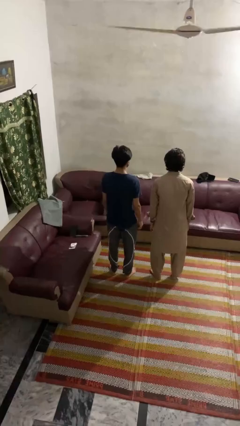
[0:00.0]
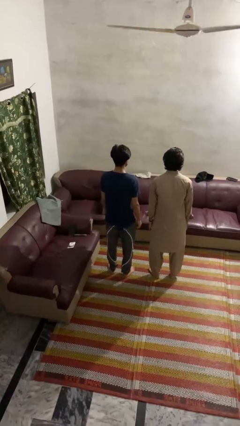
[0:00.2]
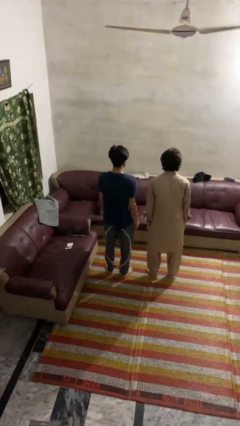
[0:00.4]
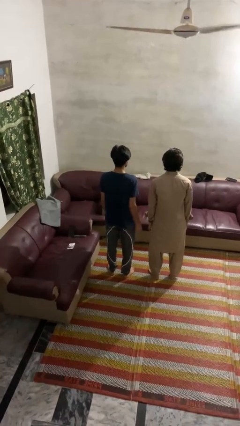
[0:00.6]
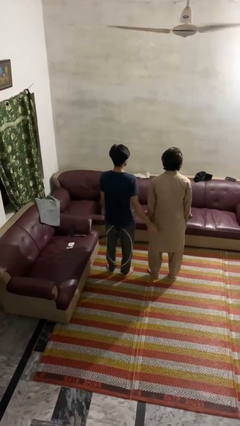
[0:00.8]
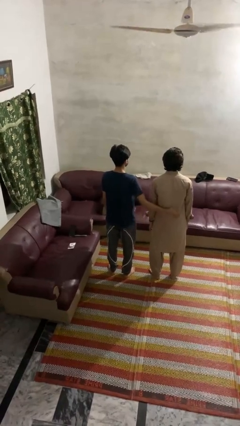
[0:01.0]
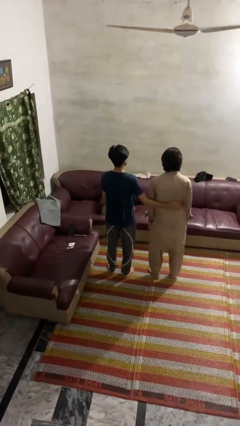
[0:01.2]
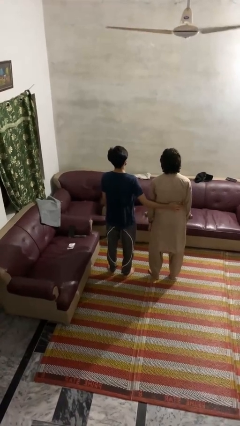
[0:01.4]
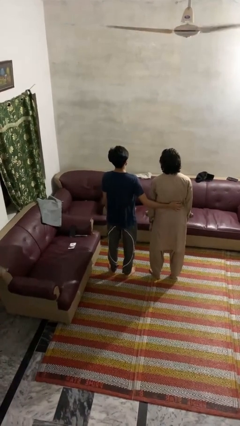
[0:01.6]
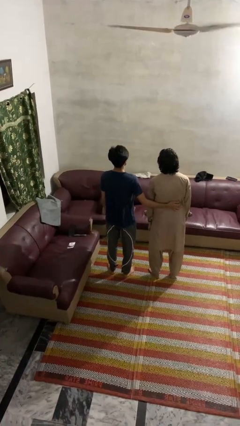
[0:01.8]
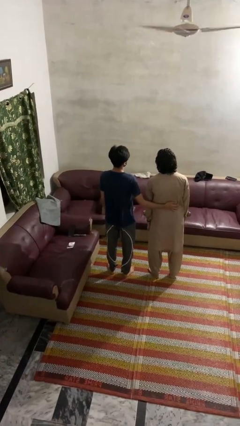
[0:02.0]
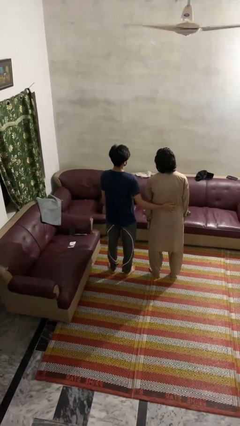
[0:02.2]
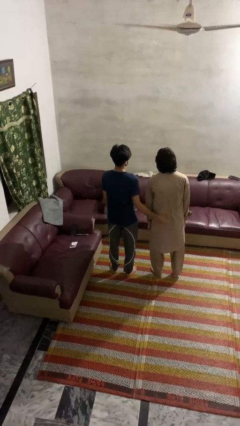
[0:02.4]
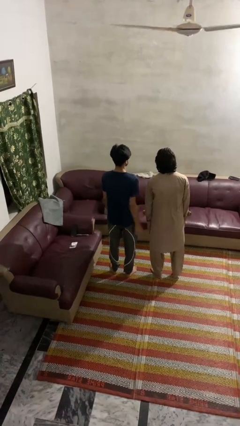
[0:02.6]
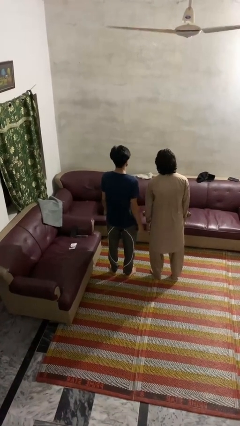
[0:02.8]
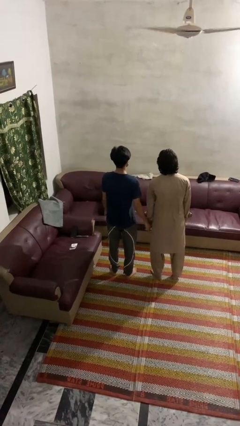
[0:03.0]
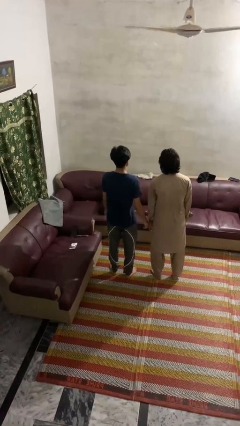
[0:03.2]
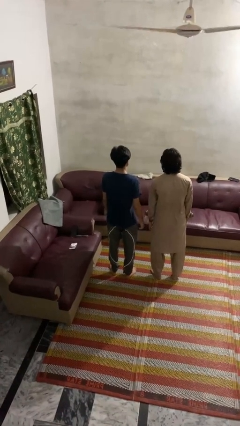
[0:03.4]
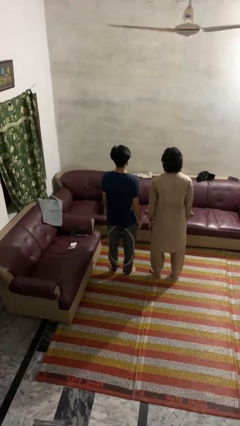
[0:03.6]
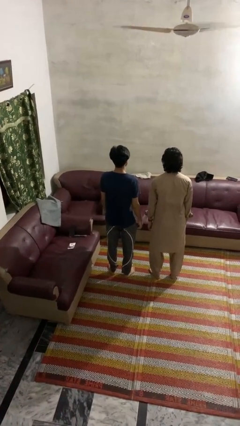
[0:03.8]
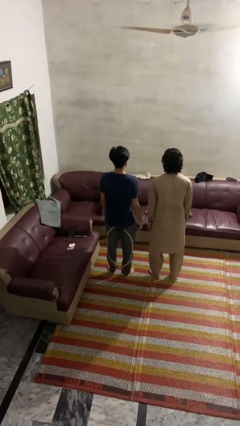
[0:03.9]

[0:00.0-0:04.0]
person touches back of person

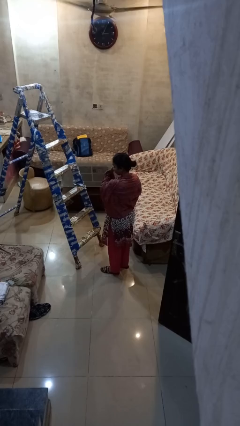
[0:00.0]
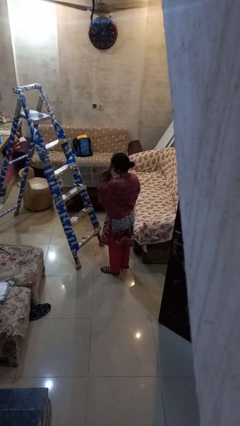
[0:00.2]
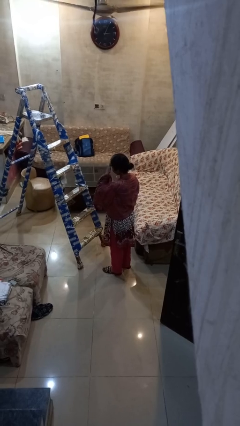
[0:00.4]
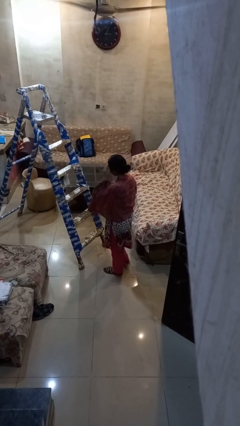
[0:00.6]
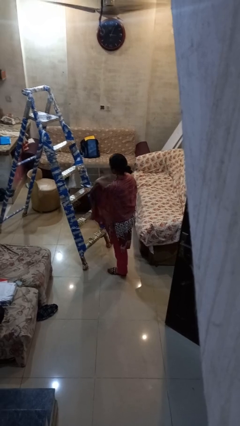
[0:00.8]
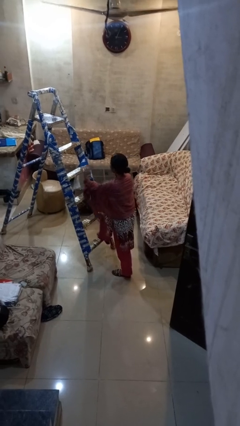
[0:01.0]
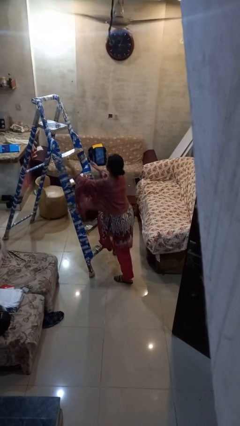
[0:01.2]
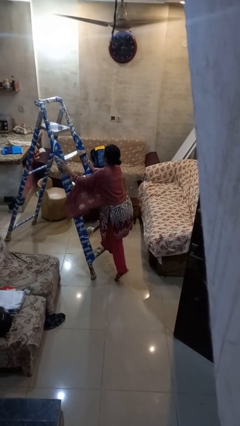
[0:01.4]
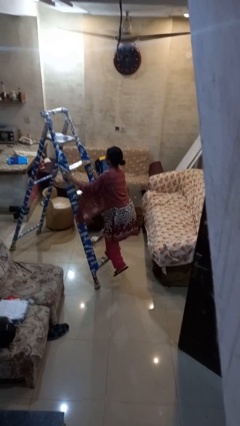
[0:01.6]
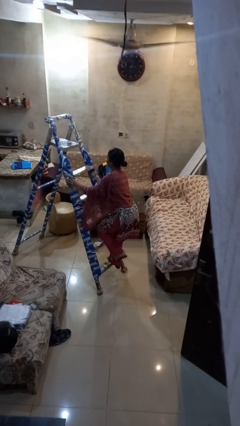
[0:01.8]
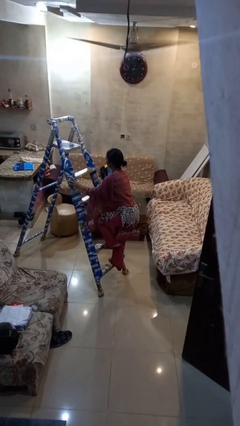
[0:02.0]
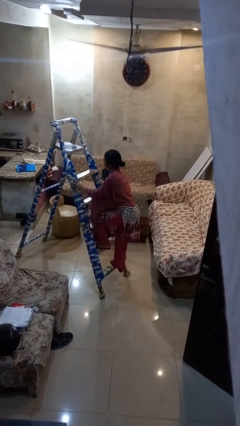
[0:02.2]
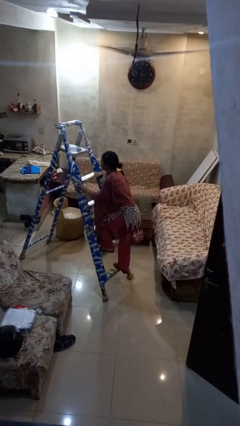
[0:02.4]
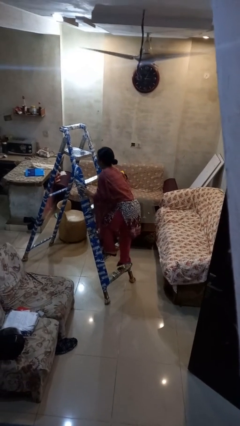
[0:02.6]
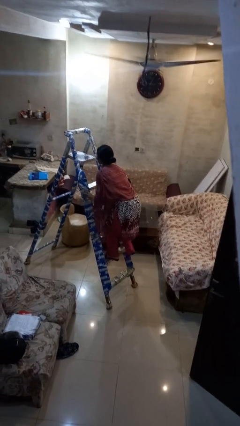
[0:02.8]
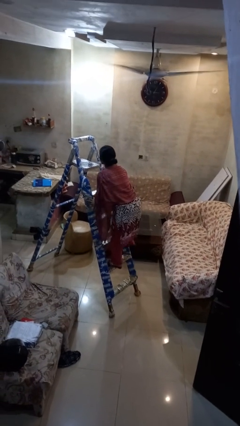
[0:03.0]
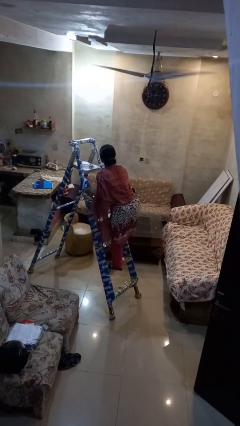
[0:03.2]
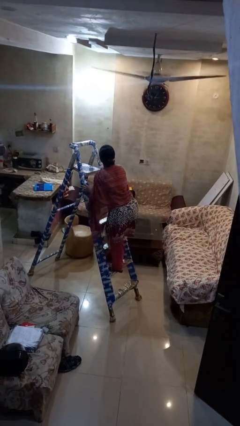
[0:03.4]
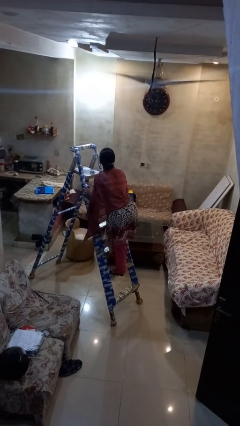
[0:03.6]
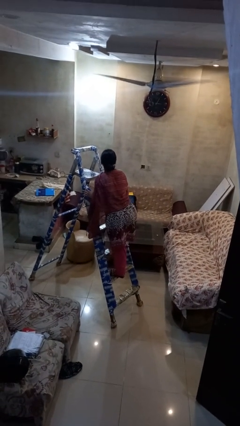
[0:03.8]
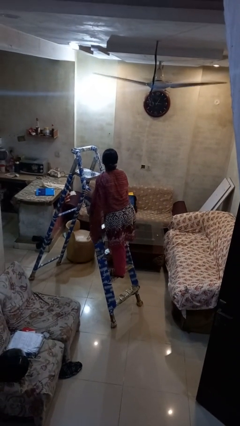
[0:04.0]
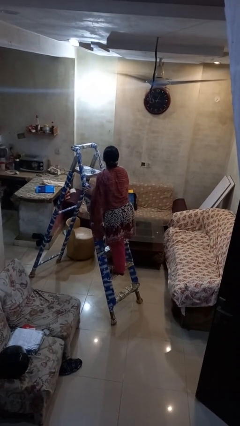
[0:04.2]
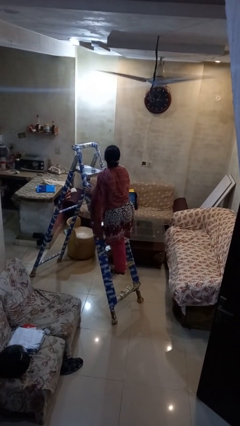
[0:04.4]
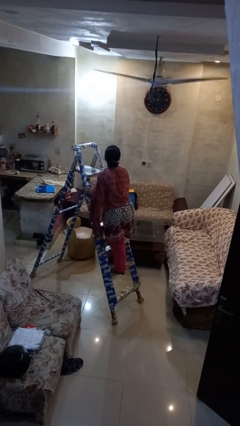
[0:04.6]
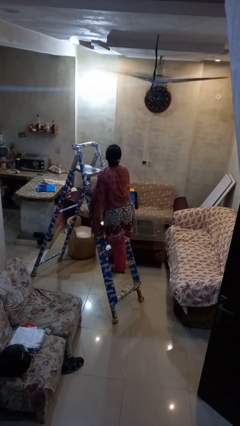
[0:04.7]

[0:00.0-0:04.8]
person climbs up ladder

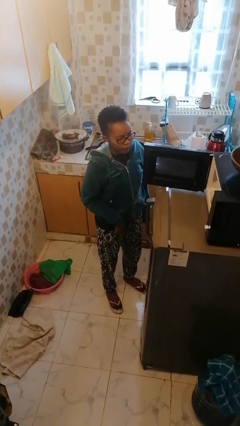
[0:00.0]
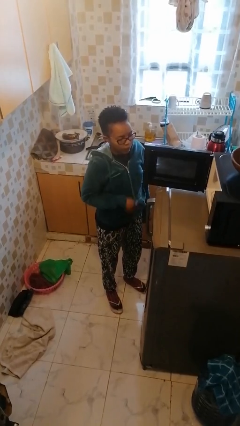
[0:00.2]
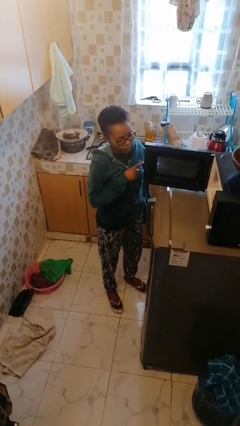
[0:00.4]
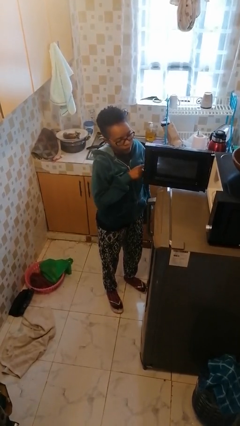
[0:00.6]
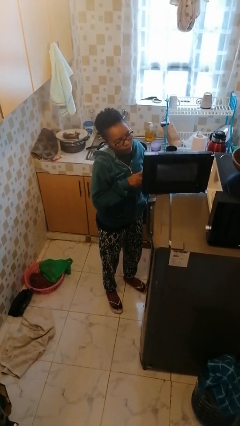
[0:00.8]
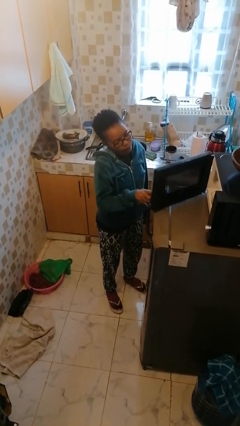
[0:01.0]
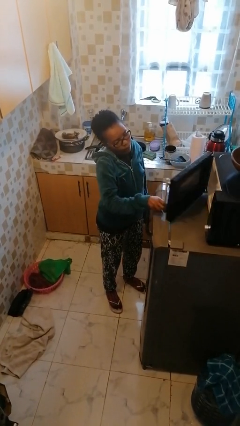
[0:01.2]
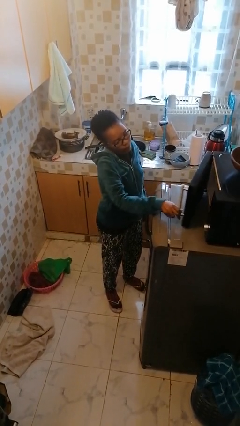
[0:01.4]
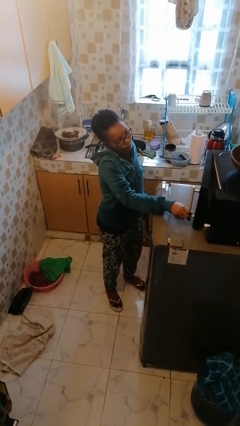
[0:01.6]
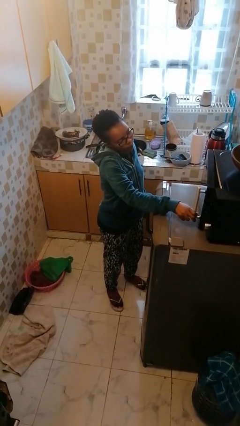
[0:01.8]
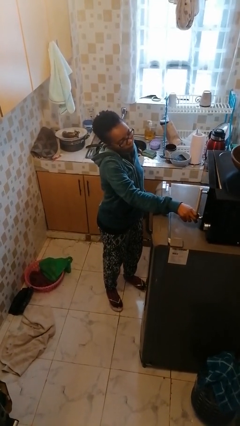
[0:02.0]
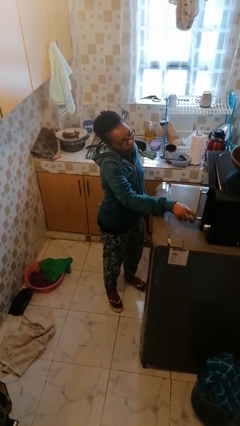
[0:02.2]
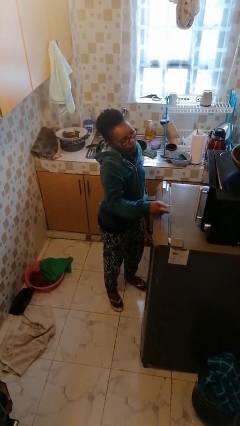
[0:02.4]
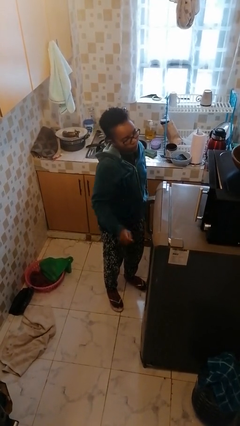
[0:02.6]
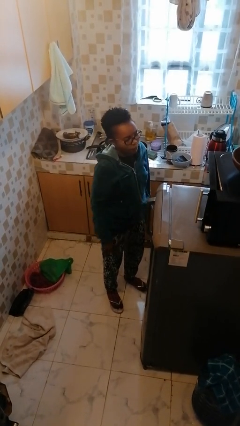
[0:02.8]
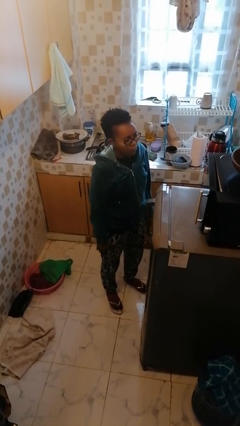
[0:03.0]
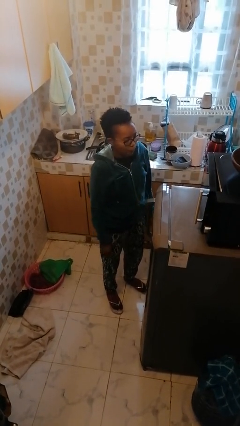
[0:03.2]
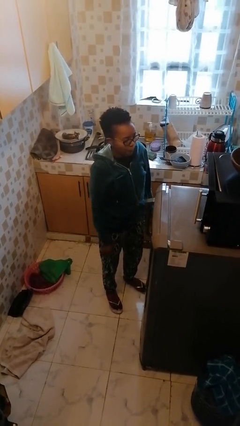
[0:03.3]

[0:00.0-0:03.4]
person closes microwave

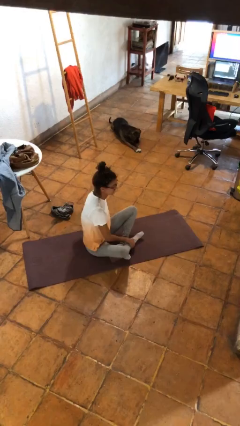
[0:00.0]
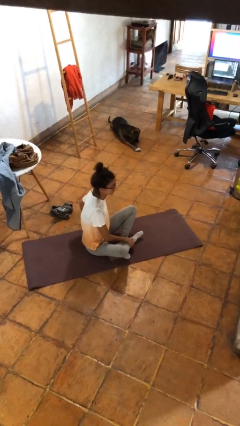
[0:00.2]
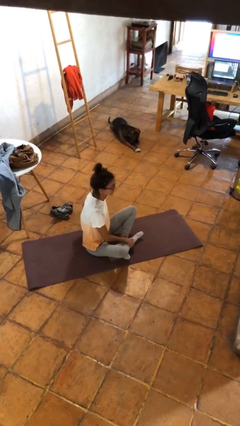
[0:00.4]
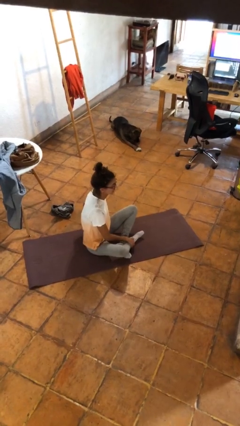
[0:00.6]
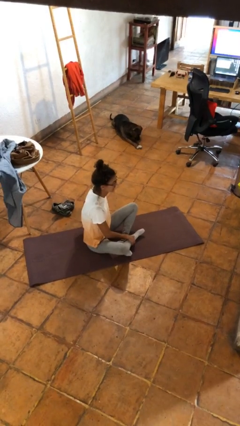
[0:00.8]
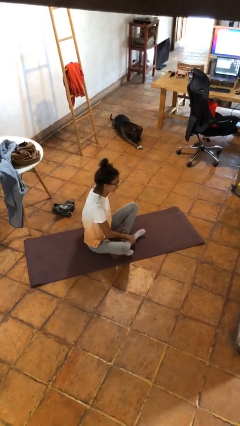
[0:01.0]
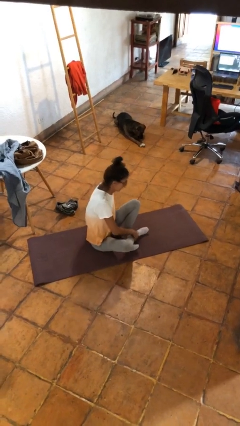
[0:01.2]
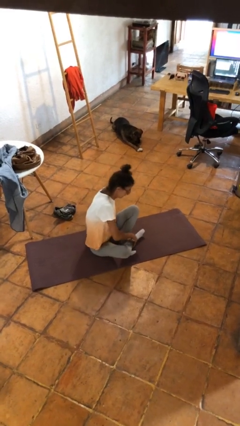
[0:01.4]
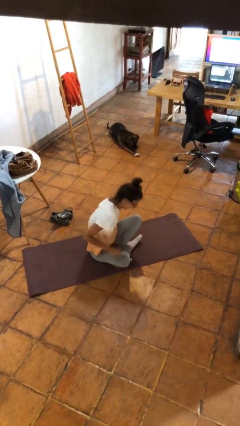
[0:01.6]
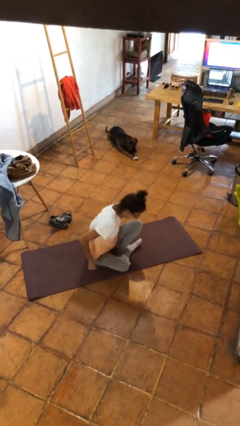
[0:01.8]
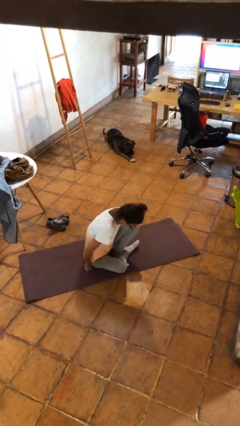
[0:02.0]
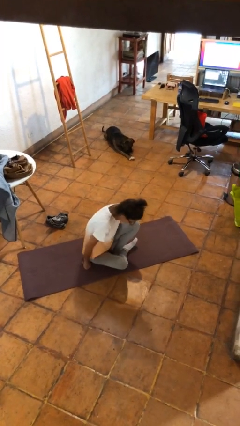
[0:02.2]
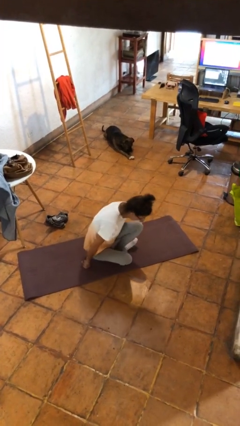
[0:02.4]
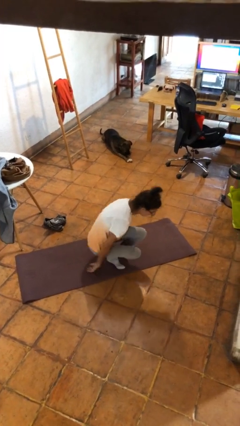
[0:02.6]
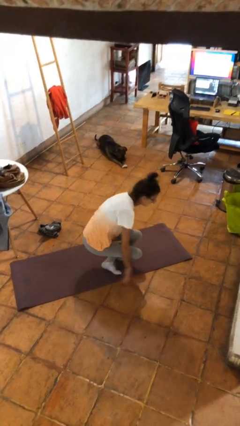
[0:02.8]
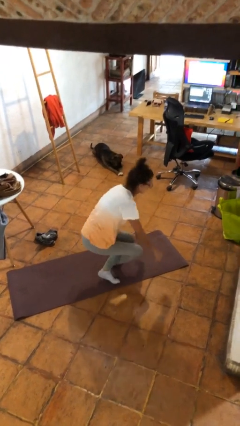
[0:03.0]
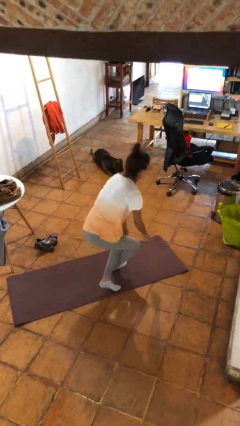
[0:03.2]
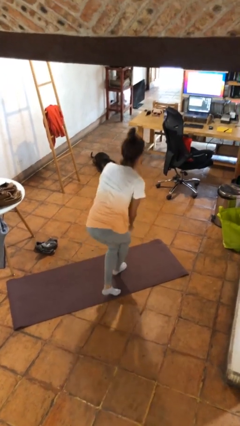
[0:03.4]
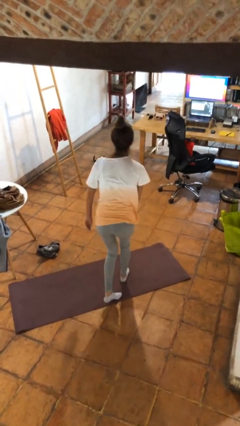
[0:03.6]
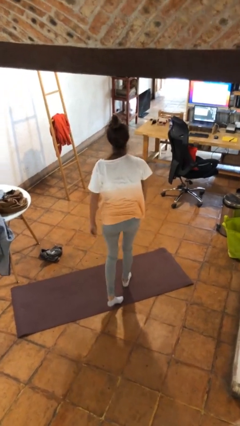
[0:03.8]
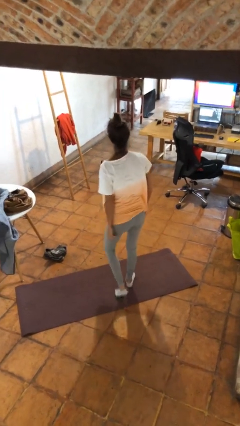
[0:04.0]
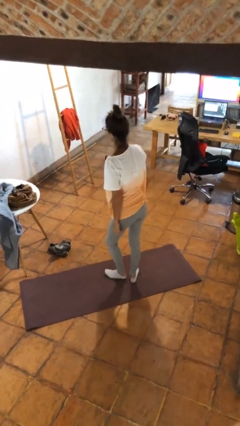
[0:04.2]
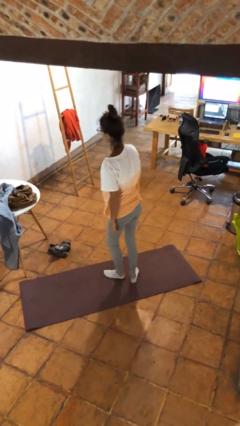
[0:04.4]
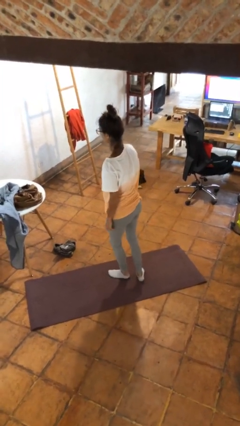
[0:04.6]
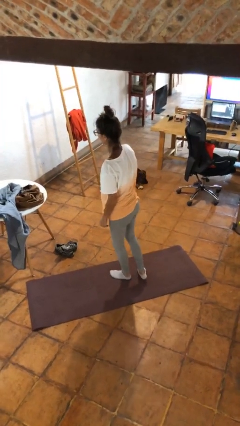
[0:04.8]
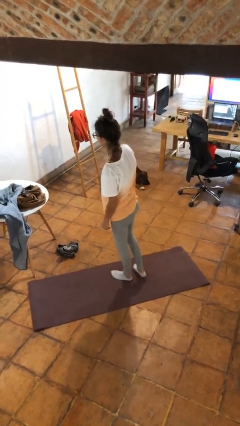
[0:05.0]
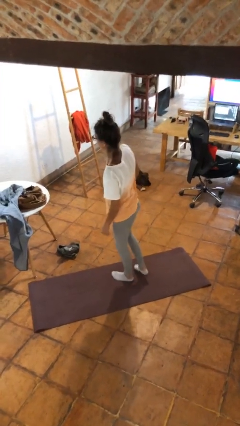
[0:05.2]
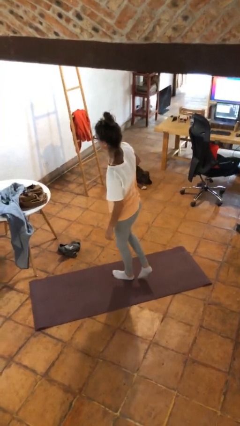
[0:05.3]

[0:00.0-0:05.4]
person sits crisscross

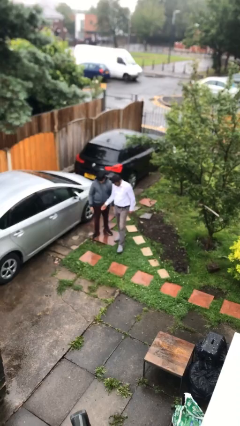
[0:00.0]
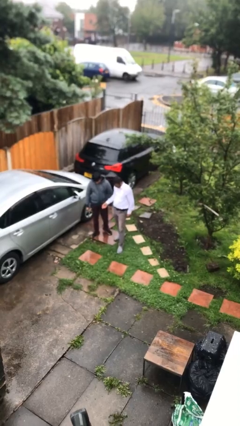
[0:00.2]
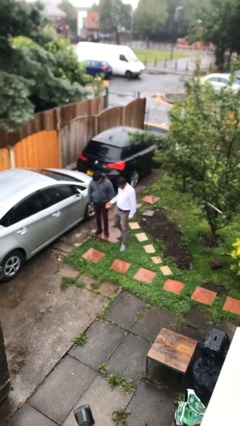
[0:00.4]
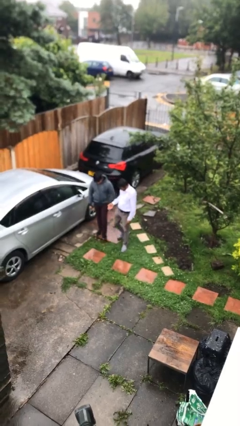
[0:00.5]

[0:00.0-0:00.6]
person talks to person
